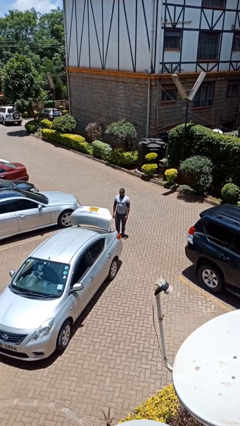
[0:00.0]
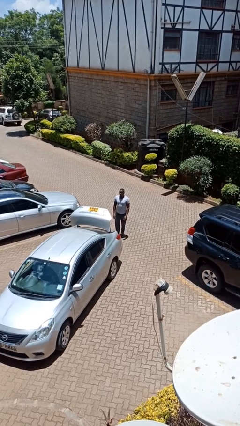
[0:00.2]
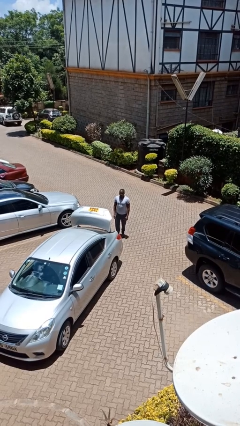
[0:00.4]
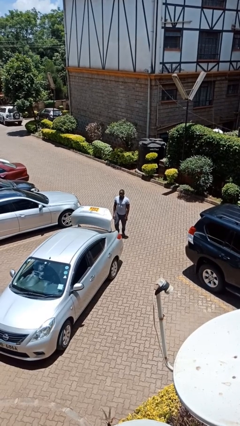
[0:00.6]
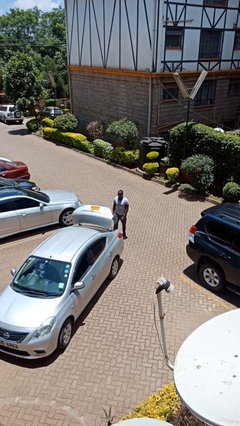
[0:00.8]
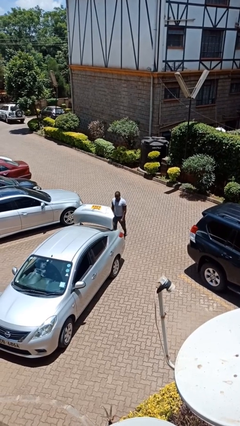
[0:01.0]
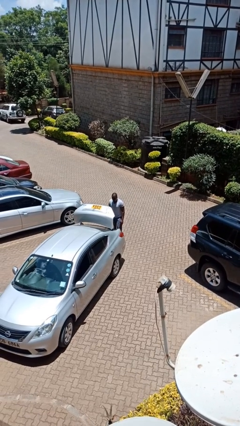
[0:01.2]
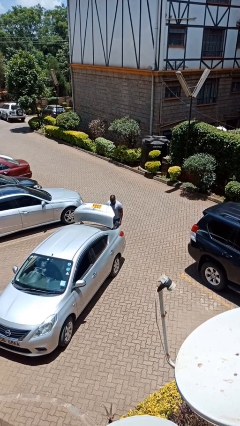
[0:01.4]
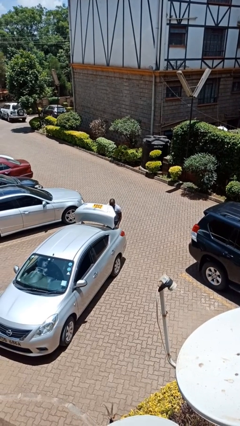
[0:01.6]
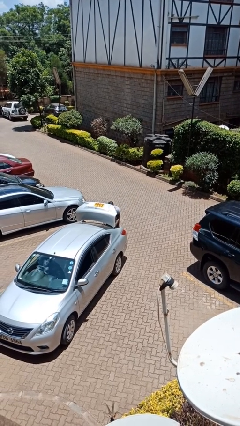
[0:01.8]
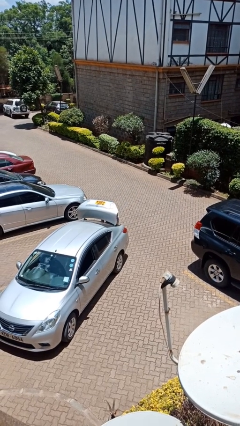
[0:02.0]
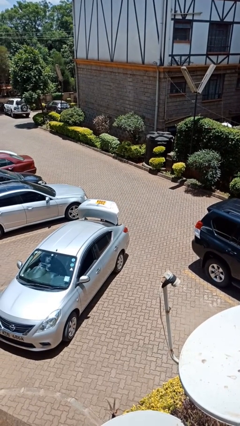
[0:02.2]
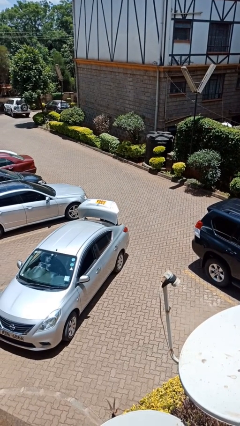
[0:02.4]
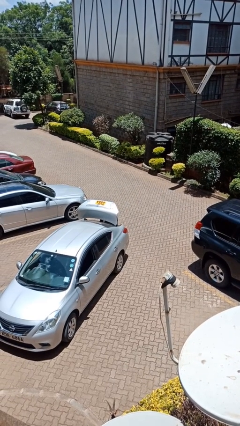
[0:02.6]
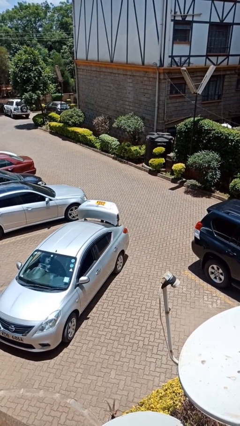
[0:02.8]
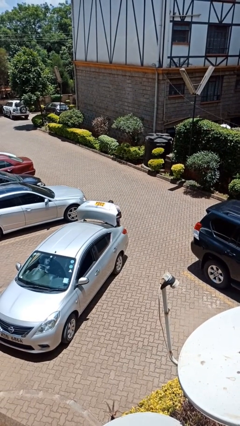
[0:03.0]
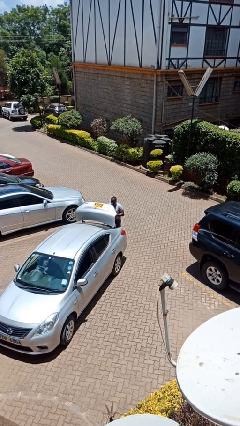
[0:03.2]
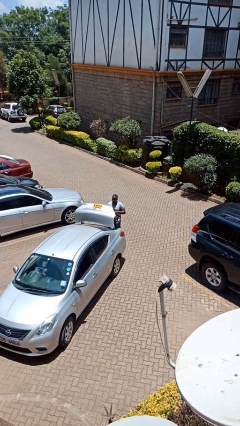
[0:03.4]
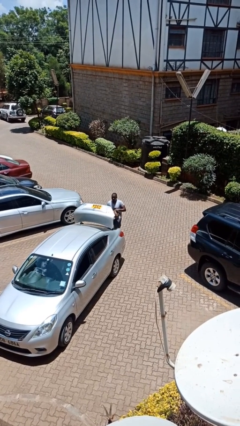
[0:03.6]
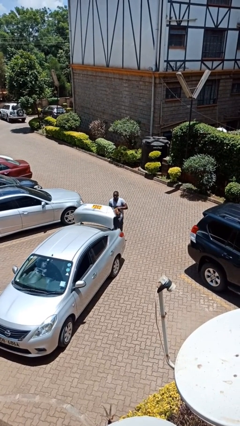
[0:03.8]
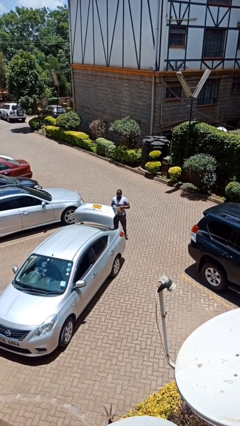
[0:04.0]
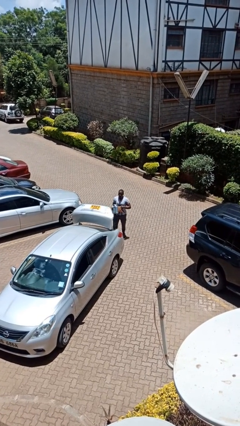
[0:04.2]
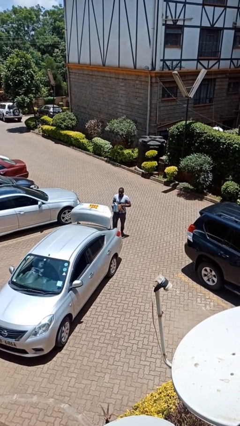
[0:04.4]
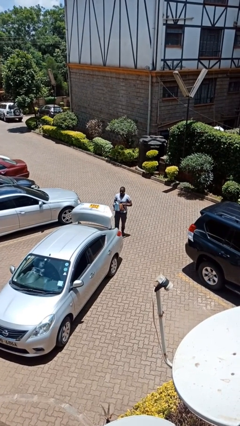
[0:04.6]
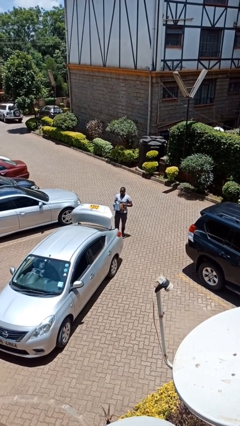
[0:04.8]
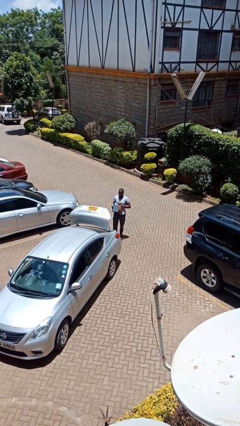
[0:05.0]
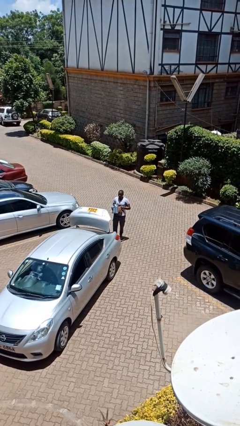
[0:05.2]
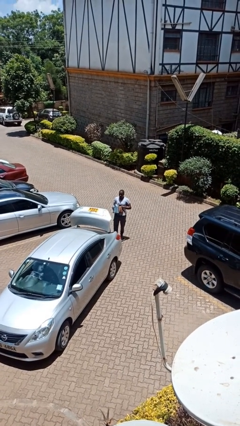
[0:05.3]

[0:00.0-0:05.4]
person unloads car

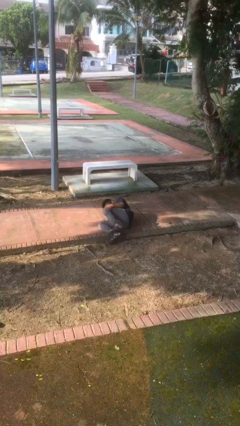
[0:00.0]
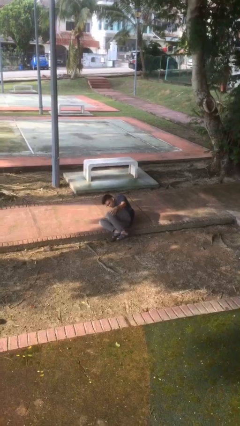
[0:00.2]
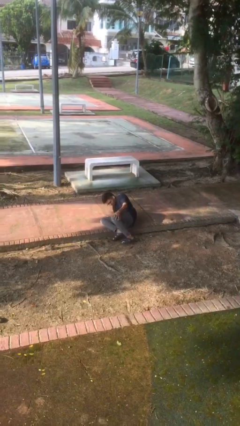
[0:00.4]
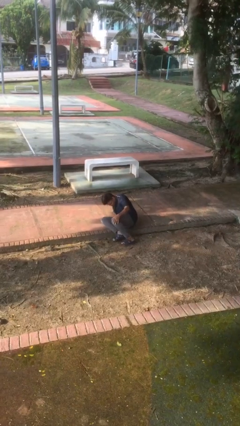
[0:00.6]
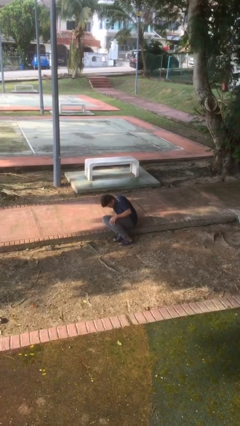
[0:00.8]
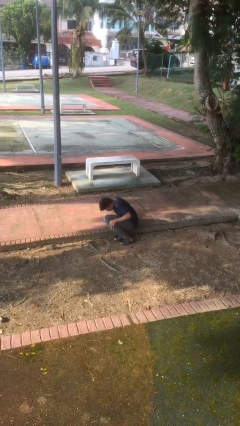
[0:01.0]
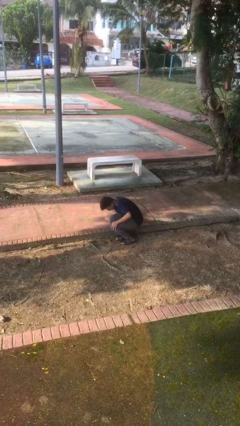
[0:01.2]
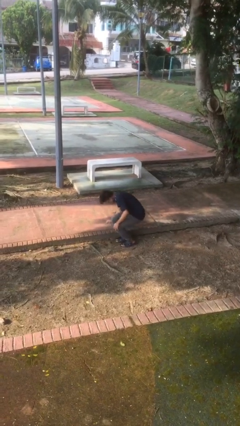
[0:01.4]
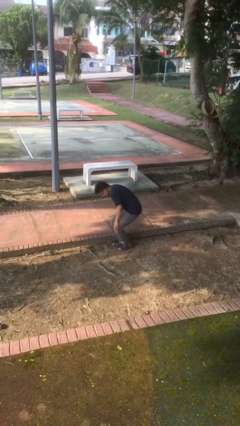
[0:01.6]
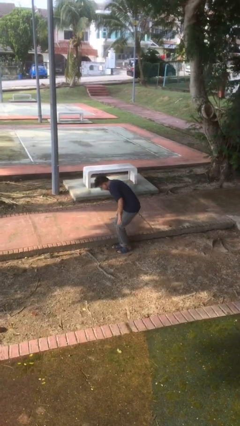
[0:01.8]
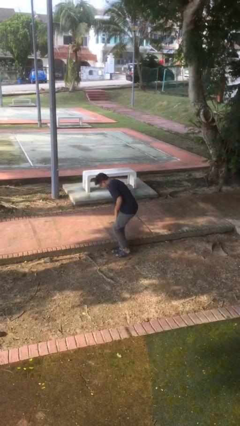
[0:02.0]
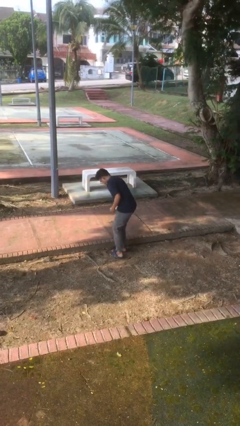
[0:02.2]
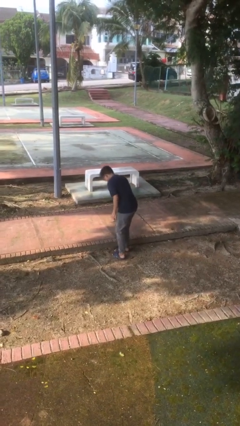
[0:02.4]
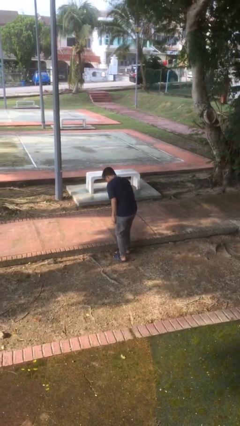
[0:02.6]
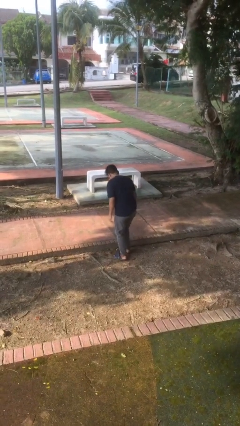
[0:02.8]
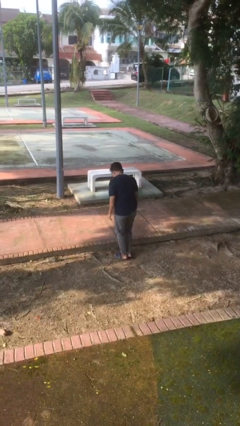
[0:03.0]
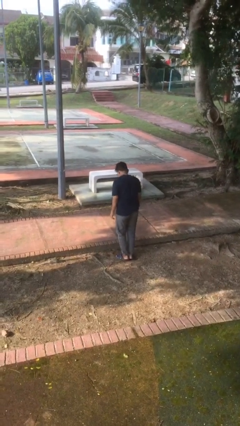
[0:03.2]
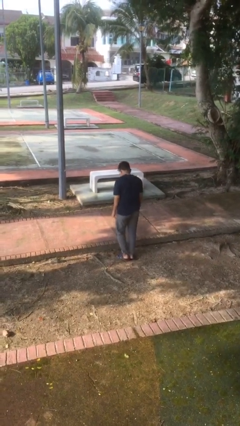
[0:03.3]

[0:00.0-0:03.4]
person stands up from floor

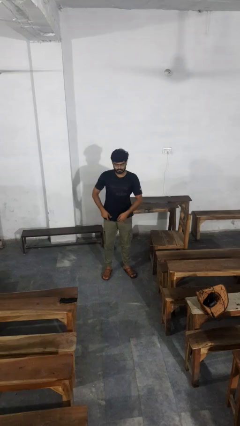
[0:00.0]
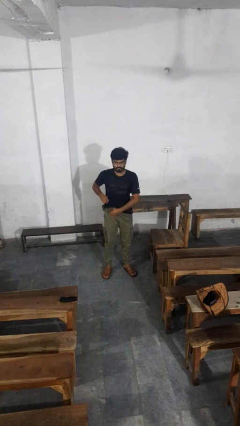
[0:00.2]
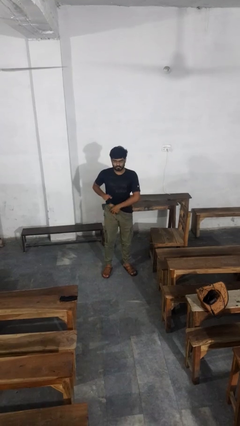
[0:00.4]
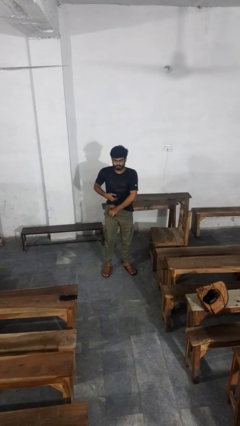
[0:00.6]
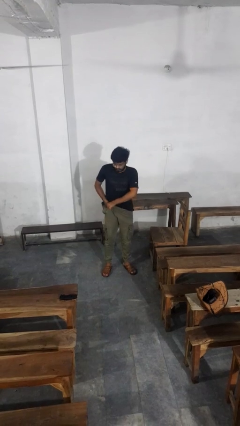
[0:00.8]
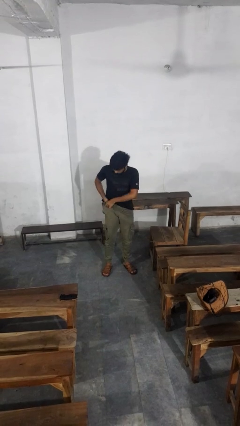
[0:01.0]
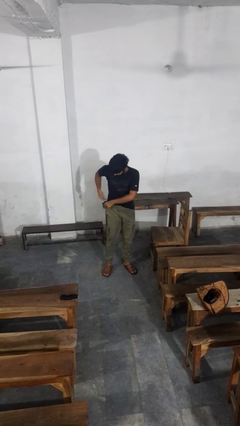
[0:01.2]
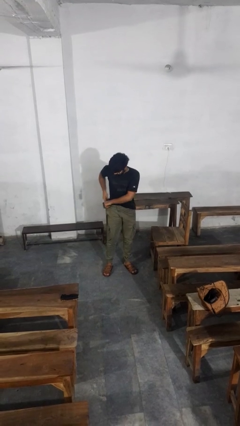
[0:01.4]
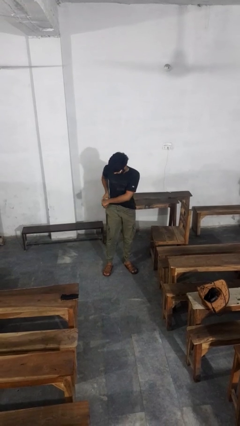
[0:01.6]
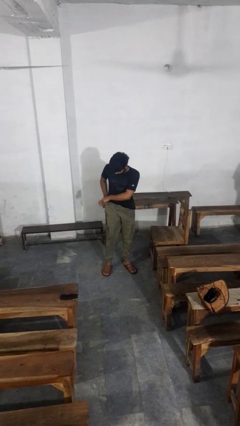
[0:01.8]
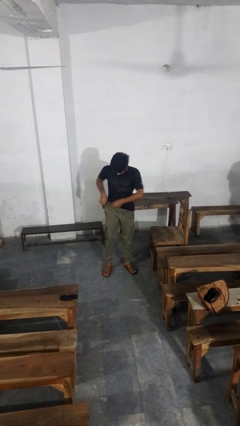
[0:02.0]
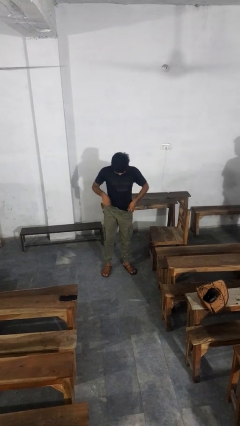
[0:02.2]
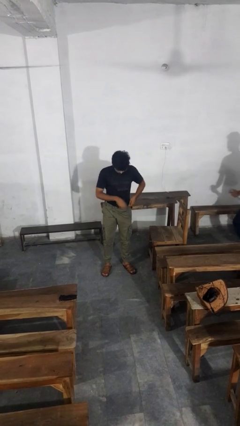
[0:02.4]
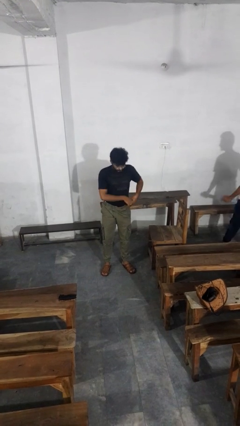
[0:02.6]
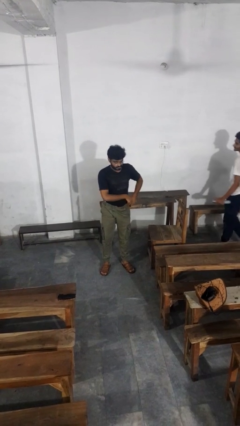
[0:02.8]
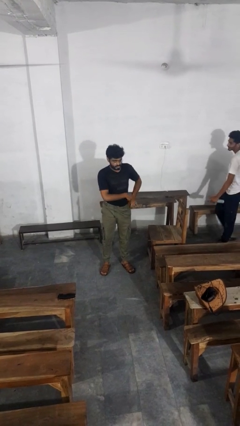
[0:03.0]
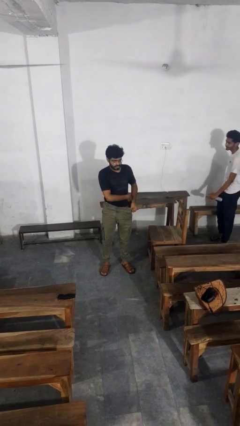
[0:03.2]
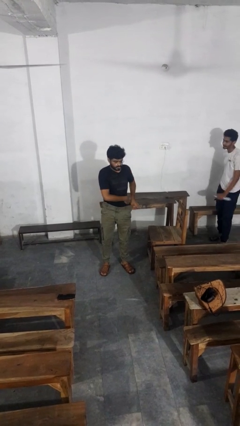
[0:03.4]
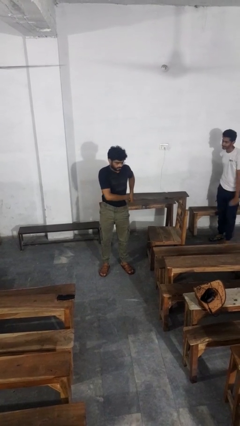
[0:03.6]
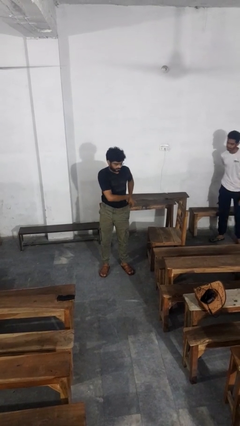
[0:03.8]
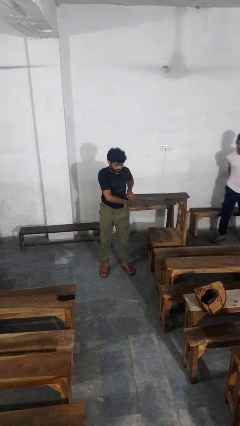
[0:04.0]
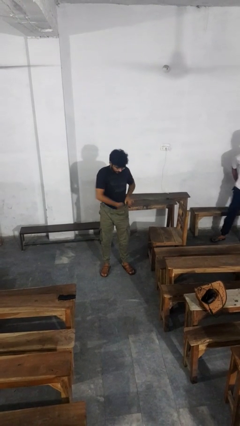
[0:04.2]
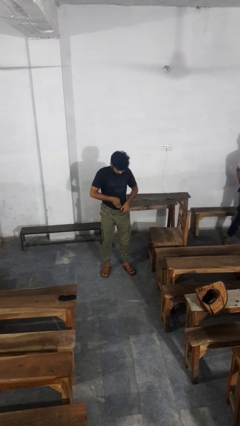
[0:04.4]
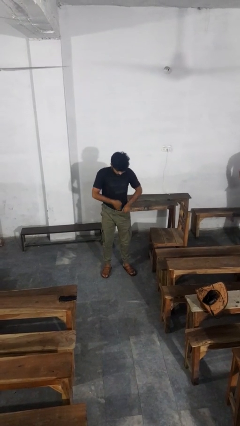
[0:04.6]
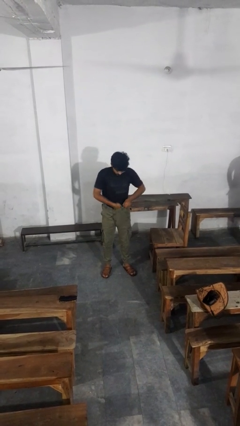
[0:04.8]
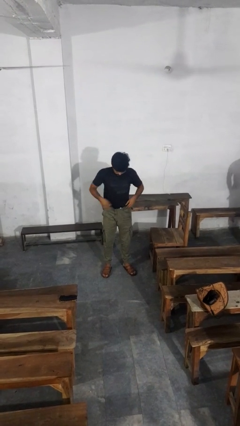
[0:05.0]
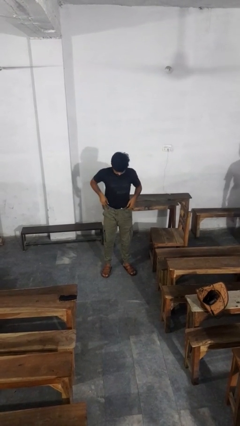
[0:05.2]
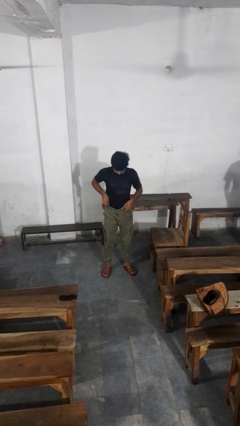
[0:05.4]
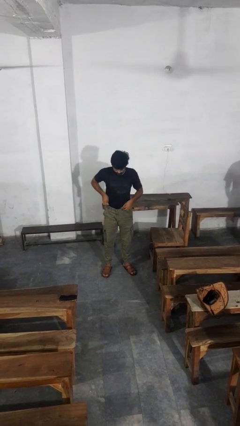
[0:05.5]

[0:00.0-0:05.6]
person tucks in shirt

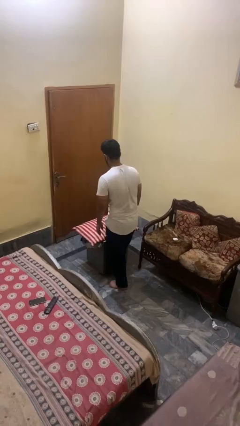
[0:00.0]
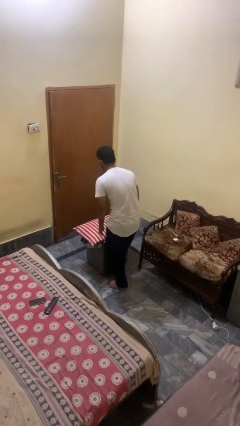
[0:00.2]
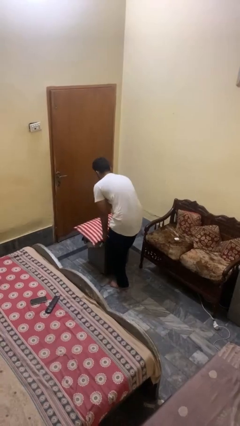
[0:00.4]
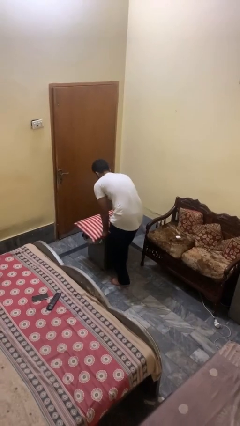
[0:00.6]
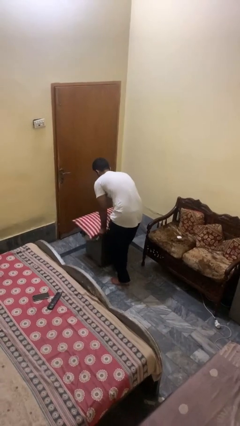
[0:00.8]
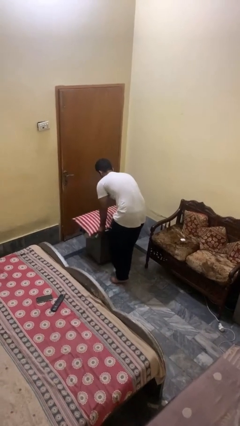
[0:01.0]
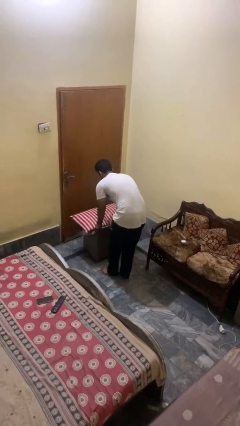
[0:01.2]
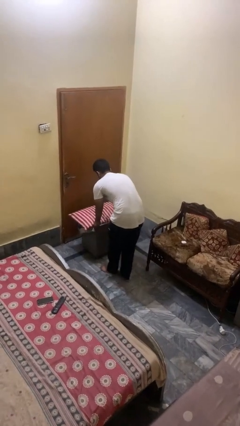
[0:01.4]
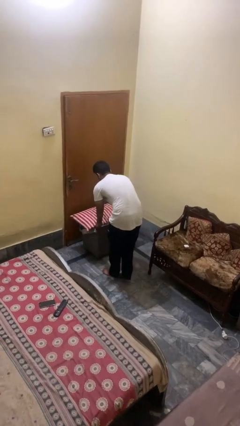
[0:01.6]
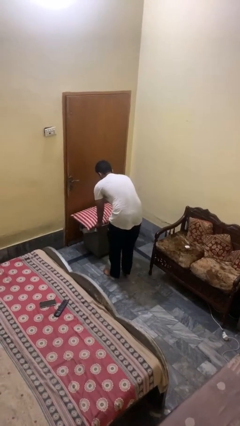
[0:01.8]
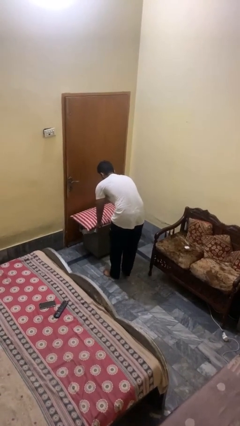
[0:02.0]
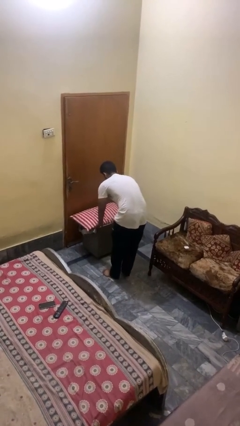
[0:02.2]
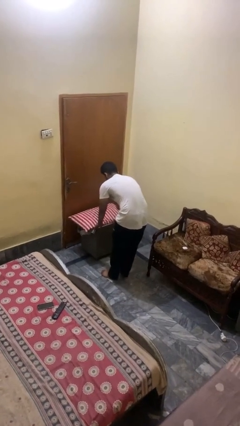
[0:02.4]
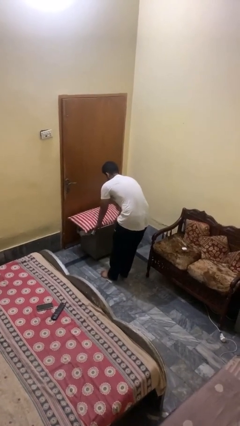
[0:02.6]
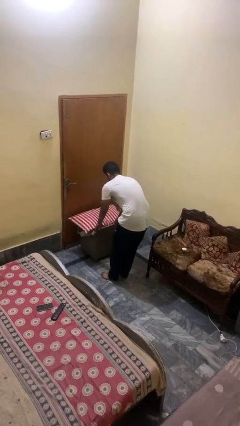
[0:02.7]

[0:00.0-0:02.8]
person pushes wheeled cart

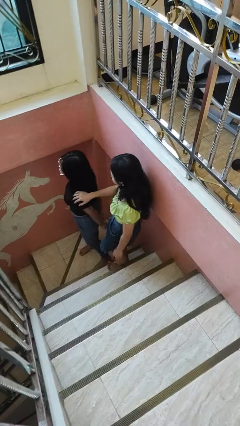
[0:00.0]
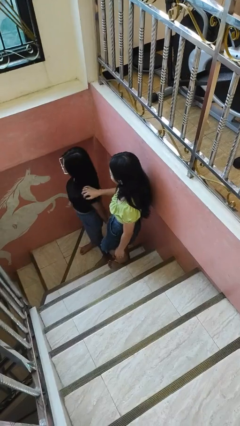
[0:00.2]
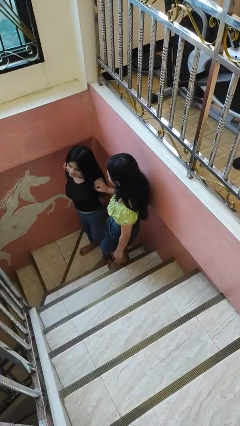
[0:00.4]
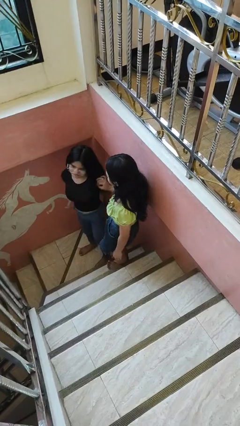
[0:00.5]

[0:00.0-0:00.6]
person grabs person by shoulder
